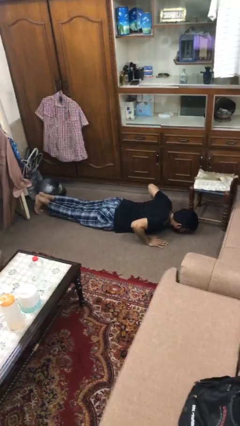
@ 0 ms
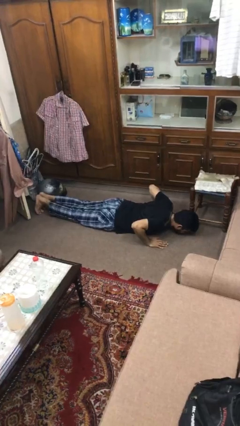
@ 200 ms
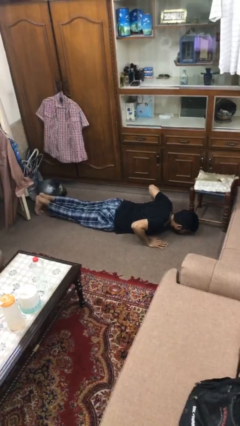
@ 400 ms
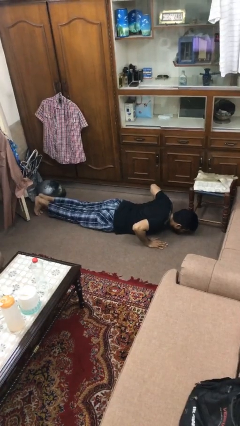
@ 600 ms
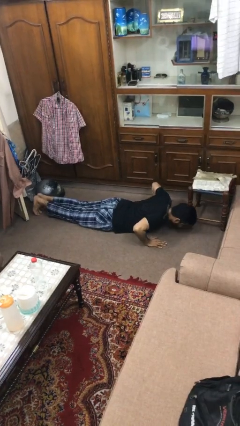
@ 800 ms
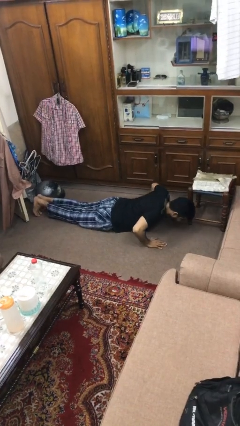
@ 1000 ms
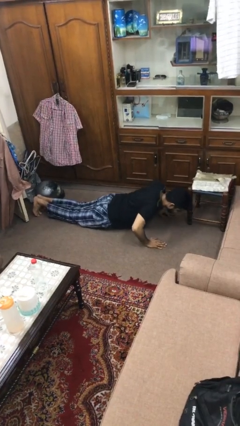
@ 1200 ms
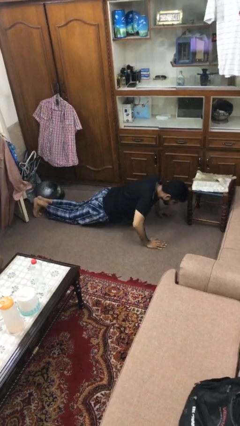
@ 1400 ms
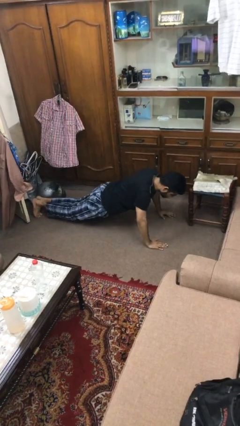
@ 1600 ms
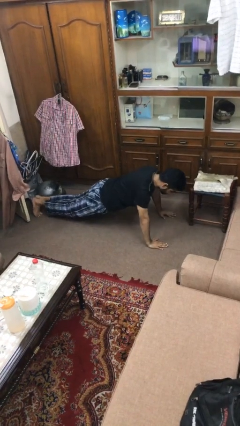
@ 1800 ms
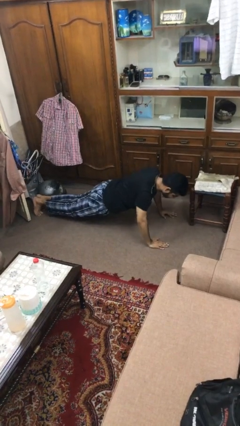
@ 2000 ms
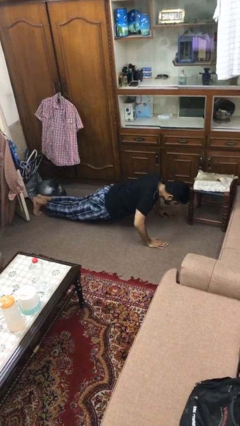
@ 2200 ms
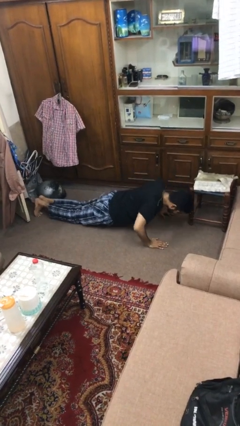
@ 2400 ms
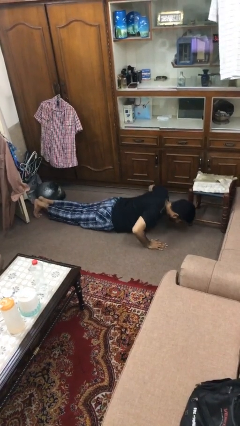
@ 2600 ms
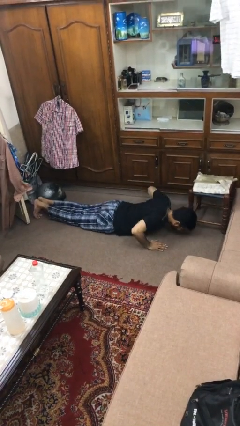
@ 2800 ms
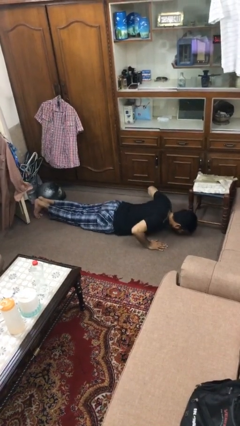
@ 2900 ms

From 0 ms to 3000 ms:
person exercises with pushup

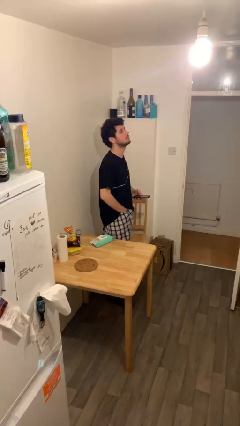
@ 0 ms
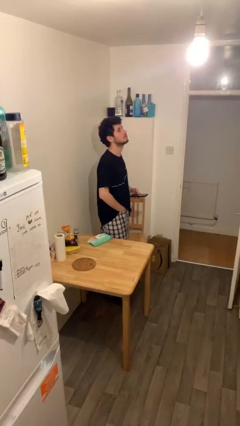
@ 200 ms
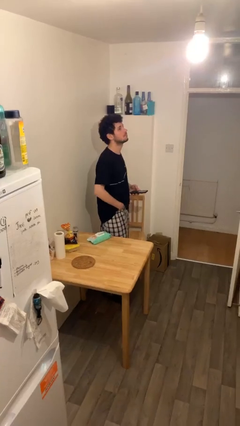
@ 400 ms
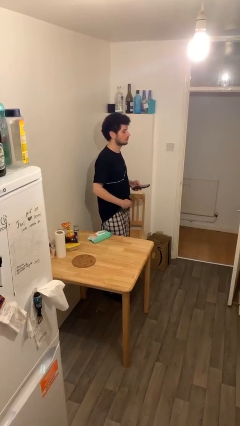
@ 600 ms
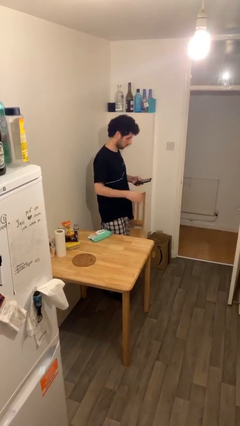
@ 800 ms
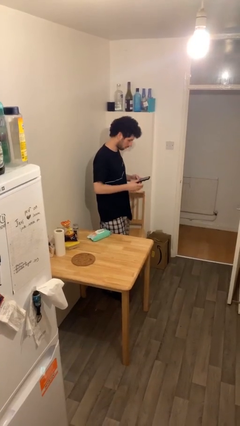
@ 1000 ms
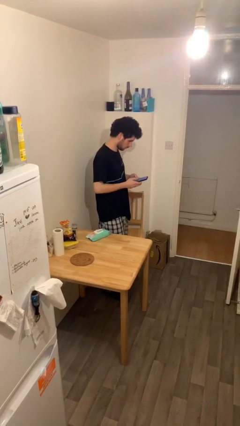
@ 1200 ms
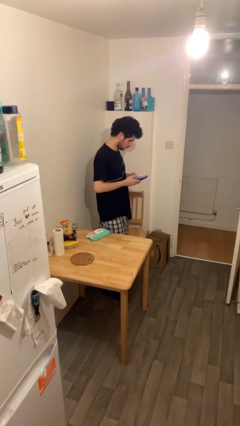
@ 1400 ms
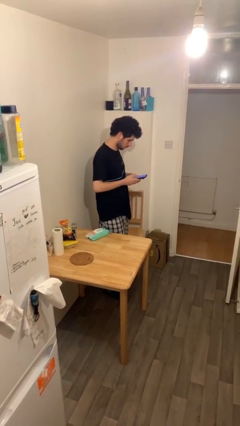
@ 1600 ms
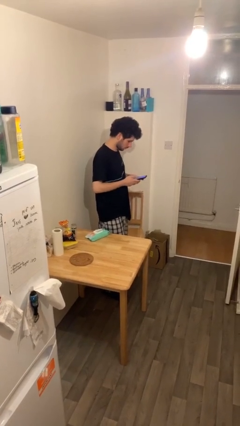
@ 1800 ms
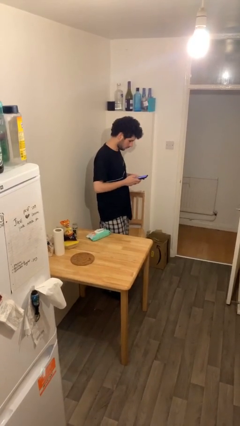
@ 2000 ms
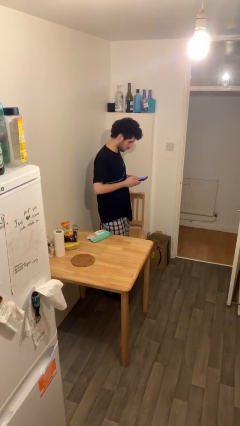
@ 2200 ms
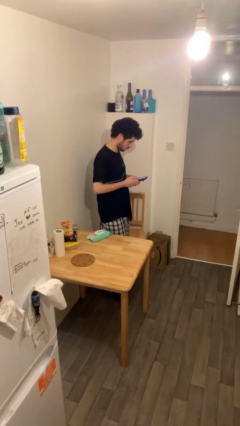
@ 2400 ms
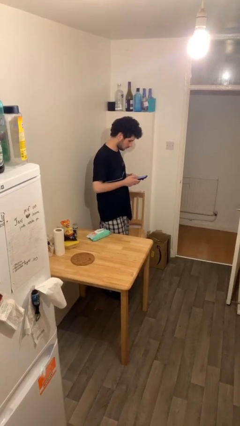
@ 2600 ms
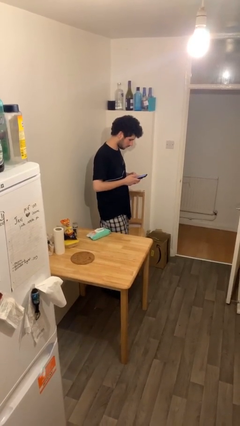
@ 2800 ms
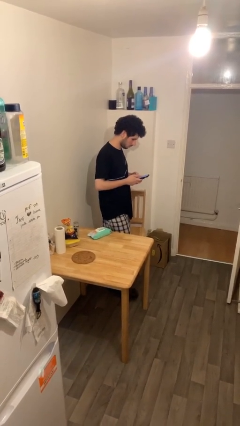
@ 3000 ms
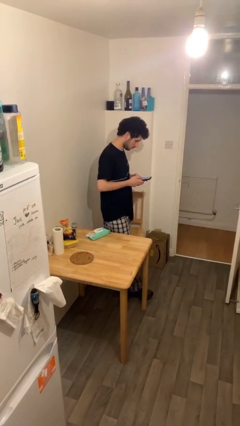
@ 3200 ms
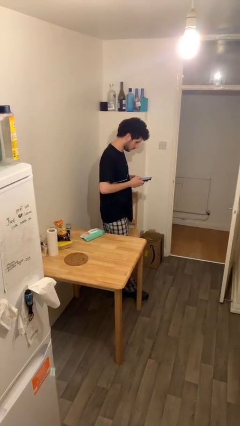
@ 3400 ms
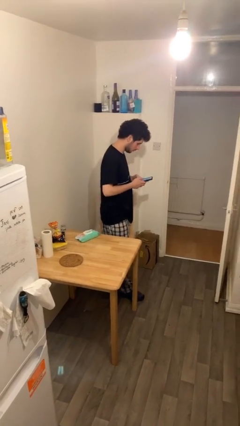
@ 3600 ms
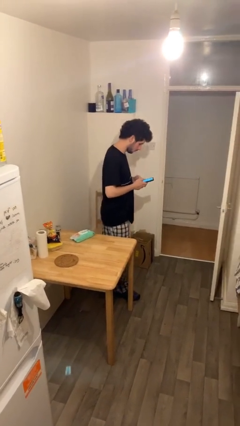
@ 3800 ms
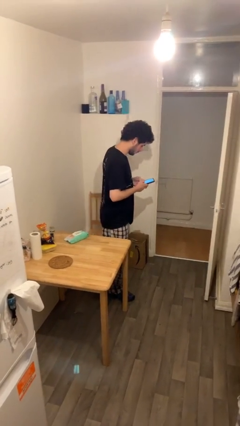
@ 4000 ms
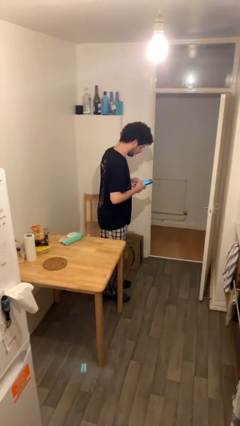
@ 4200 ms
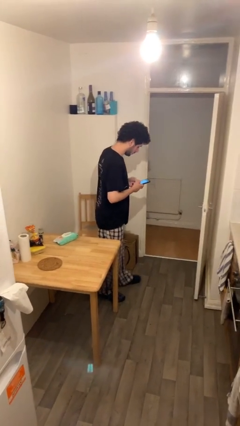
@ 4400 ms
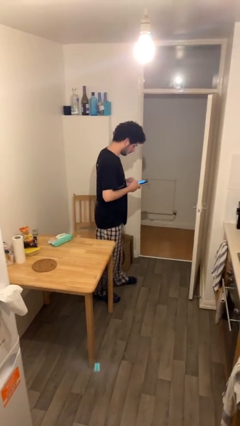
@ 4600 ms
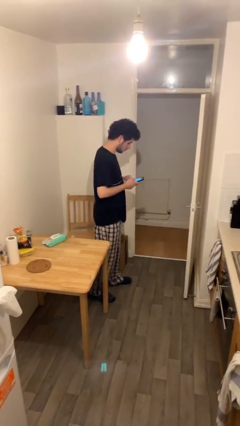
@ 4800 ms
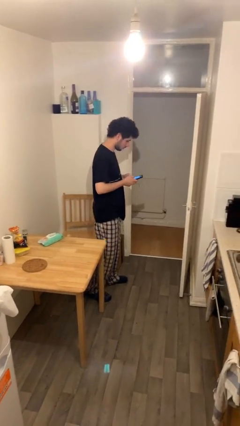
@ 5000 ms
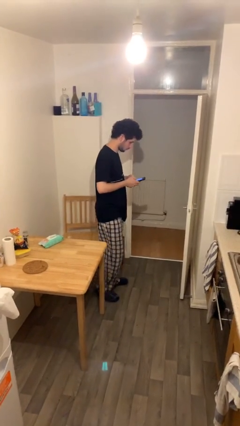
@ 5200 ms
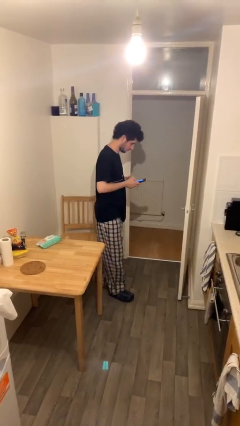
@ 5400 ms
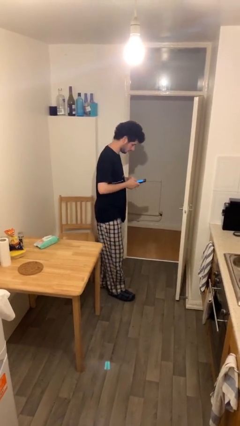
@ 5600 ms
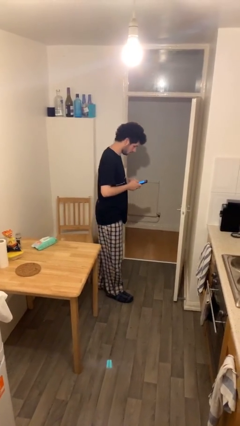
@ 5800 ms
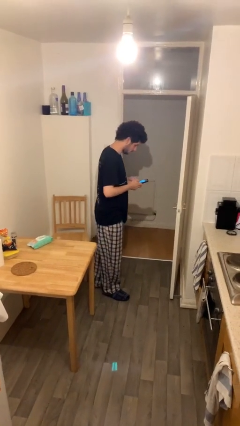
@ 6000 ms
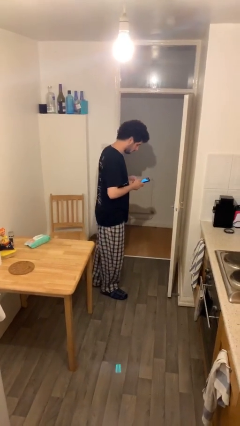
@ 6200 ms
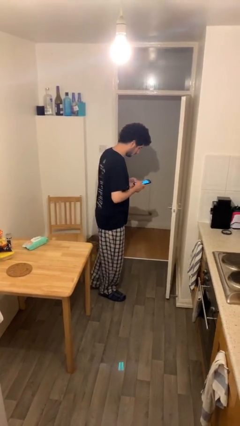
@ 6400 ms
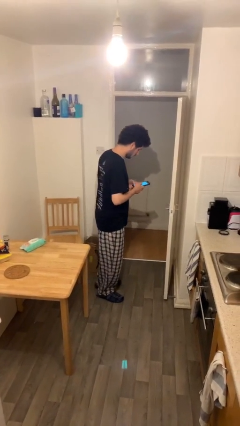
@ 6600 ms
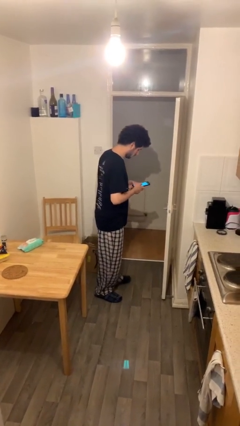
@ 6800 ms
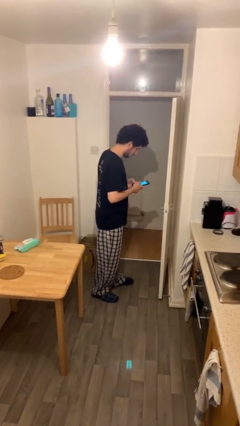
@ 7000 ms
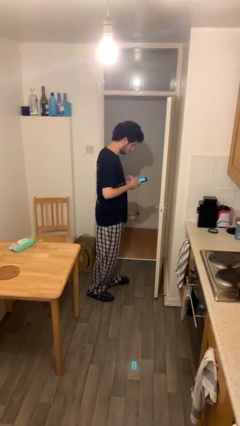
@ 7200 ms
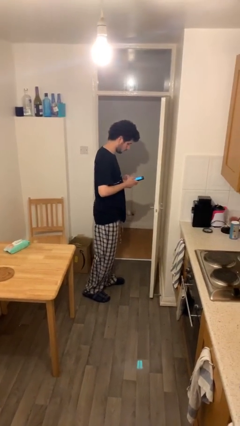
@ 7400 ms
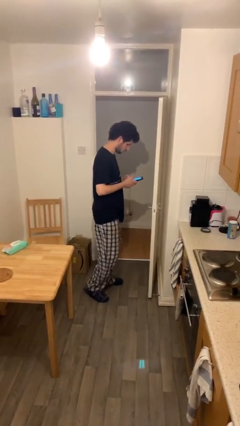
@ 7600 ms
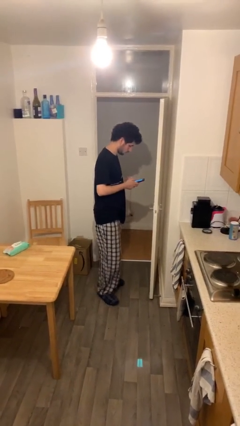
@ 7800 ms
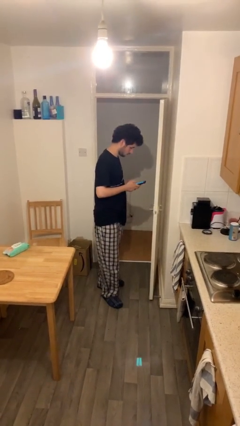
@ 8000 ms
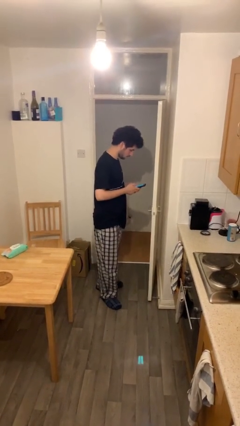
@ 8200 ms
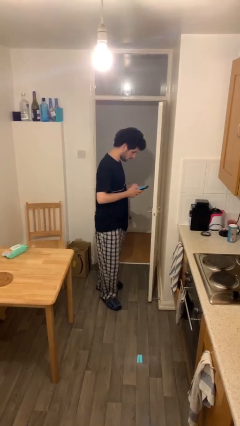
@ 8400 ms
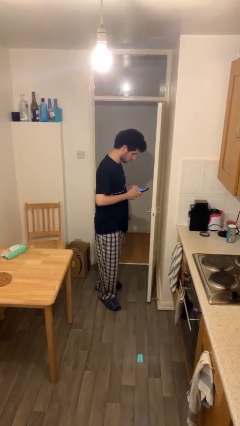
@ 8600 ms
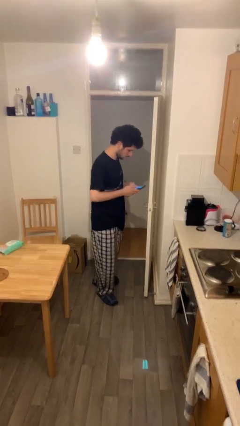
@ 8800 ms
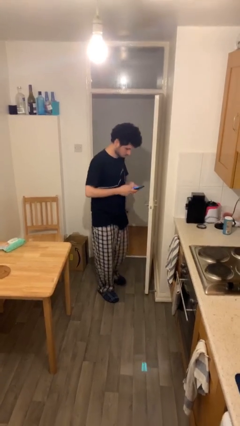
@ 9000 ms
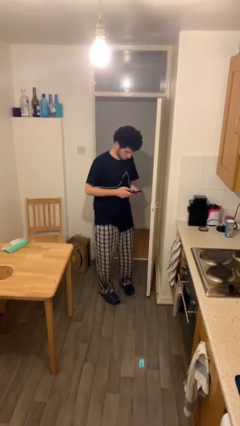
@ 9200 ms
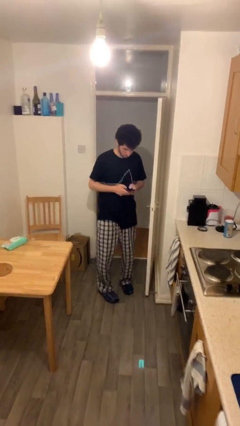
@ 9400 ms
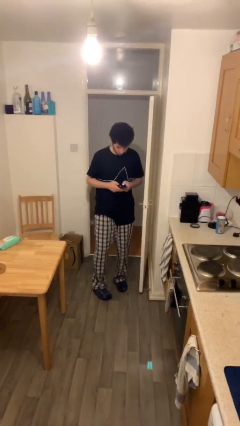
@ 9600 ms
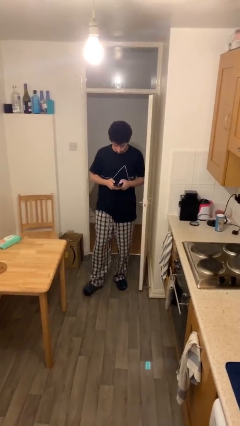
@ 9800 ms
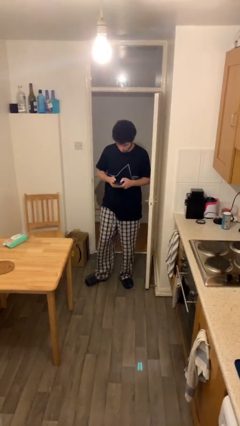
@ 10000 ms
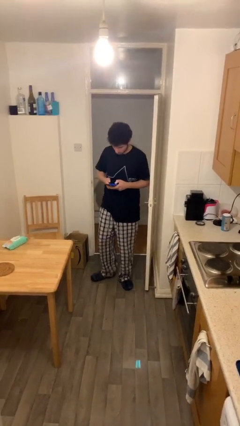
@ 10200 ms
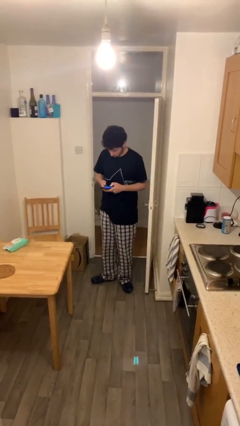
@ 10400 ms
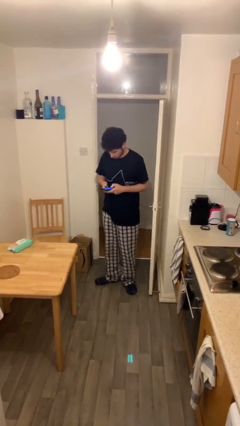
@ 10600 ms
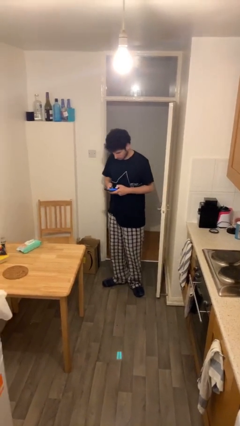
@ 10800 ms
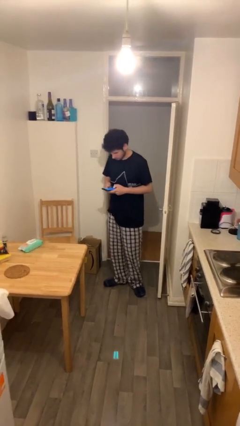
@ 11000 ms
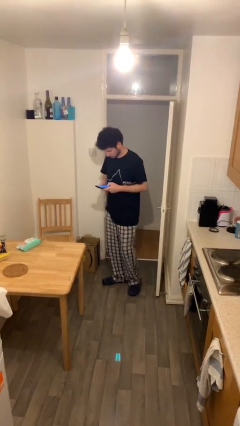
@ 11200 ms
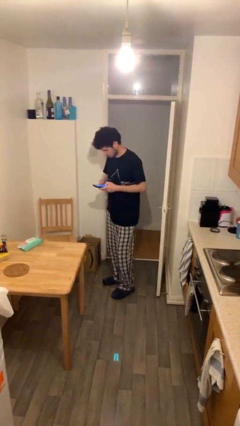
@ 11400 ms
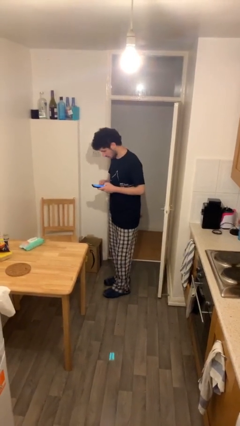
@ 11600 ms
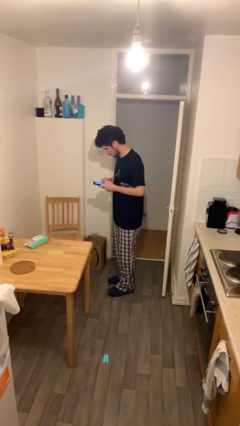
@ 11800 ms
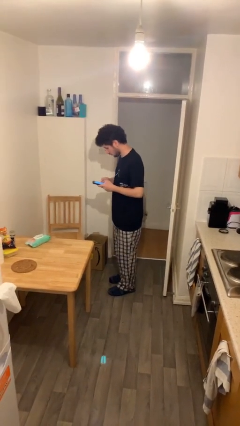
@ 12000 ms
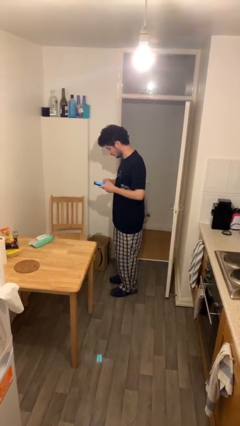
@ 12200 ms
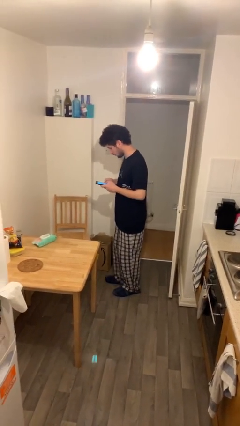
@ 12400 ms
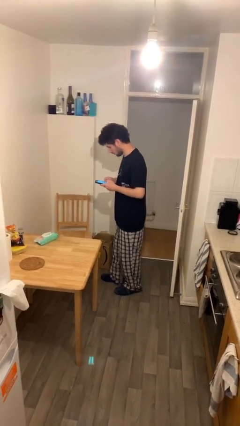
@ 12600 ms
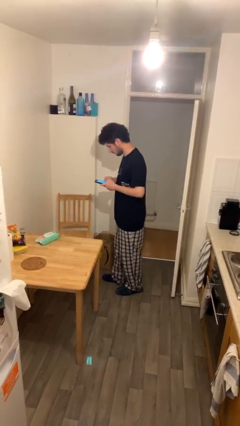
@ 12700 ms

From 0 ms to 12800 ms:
person texts on phone

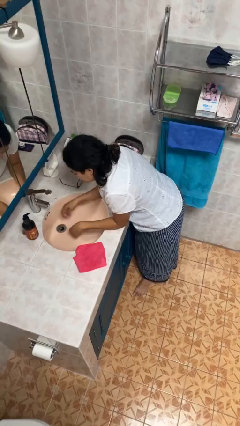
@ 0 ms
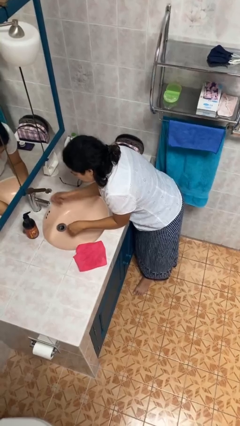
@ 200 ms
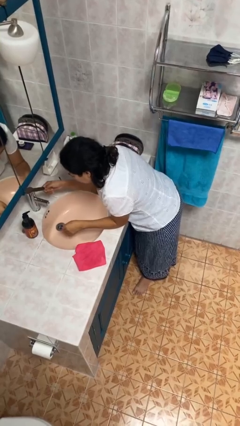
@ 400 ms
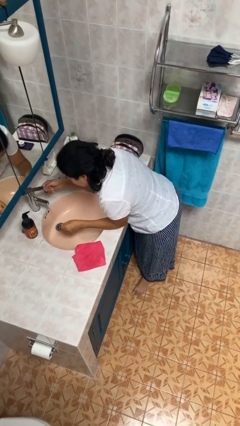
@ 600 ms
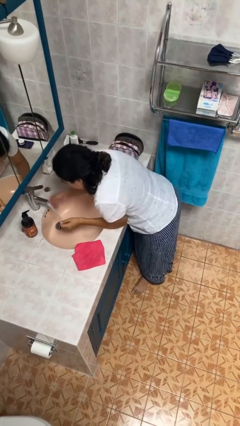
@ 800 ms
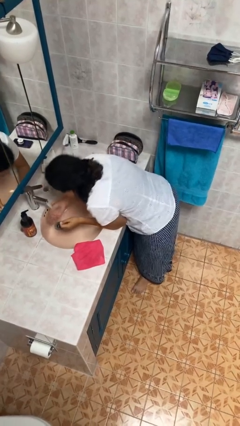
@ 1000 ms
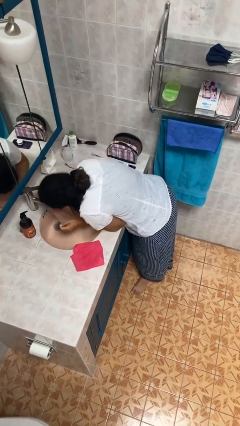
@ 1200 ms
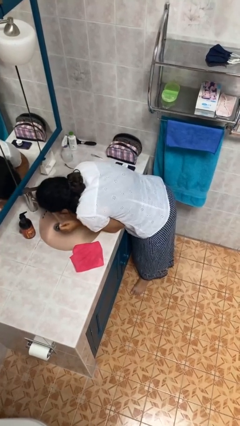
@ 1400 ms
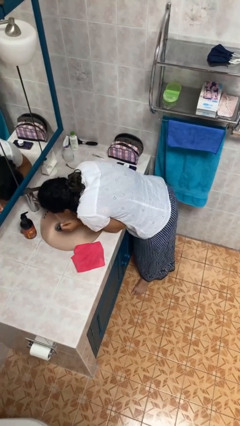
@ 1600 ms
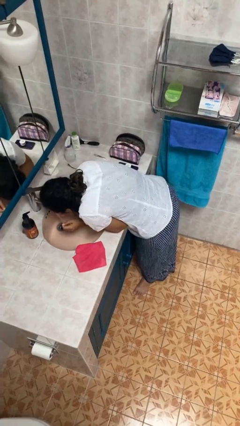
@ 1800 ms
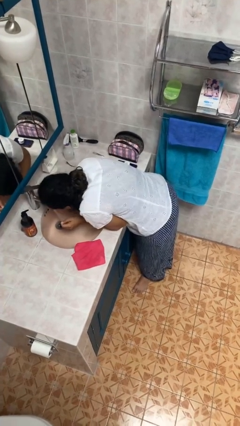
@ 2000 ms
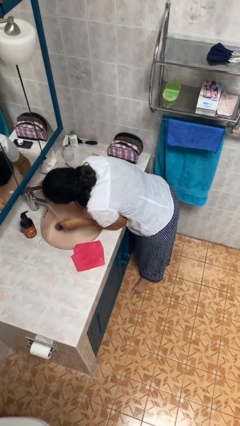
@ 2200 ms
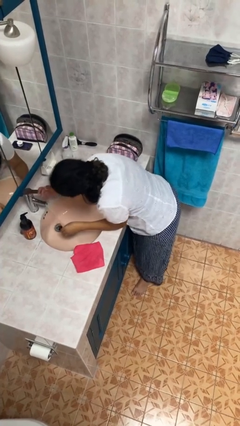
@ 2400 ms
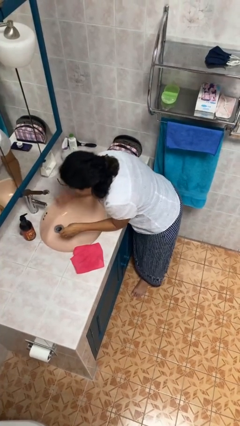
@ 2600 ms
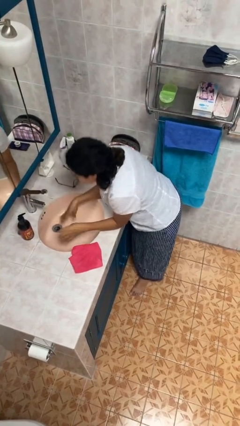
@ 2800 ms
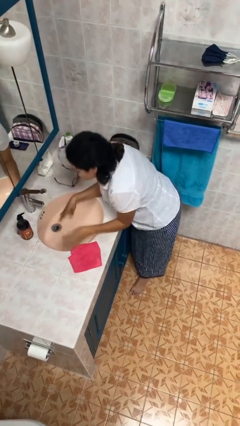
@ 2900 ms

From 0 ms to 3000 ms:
person washes face
